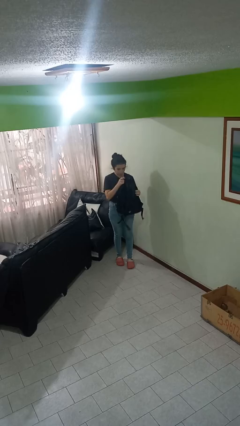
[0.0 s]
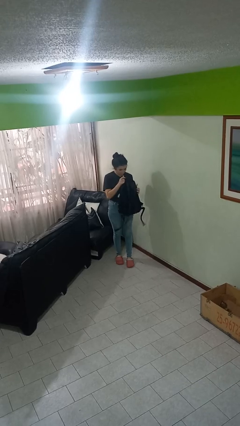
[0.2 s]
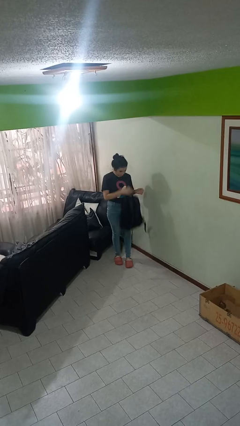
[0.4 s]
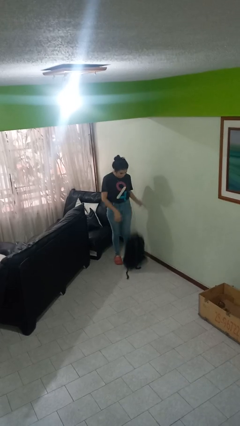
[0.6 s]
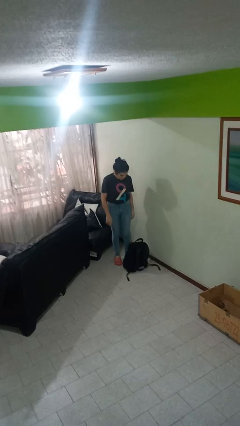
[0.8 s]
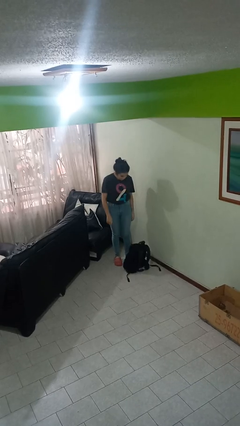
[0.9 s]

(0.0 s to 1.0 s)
person drops object

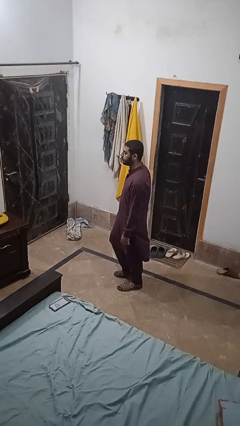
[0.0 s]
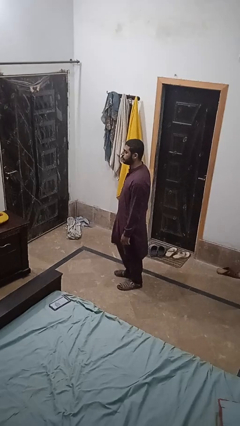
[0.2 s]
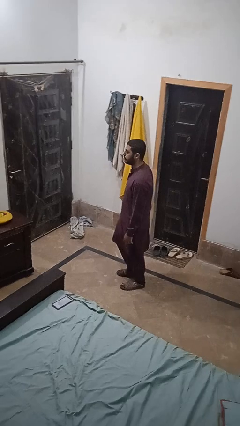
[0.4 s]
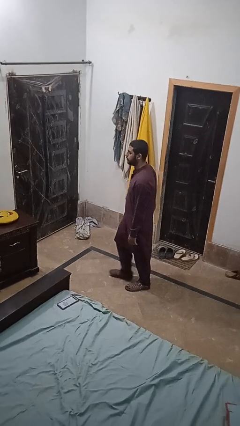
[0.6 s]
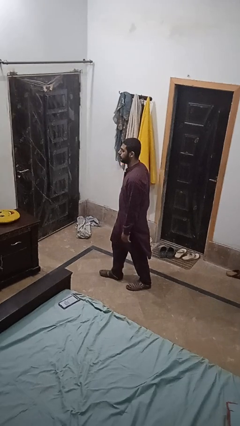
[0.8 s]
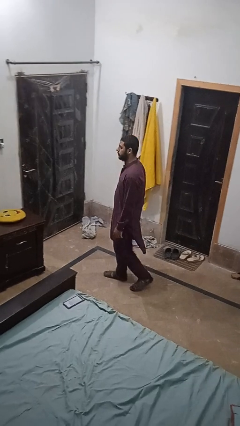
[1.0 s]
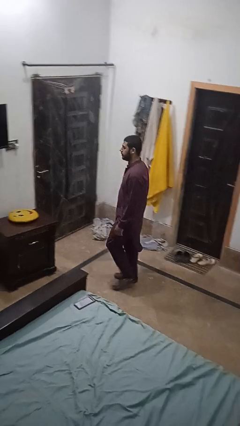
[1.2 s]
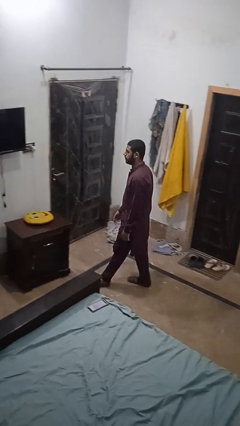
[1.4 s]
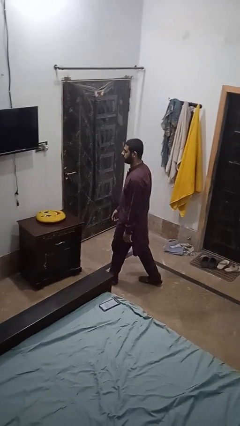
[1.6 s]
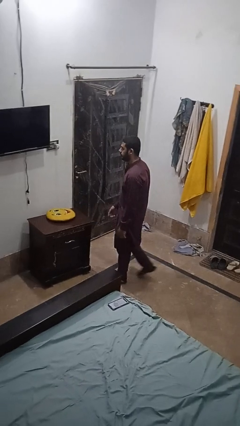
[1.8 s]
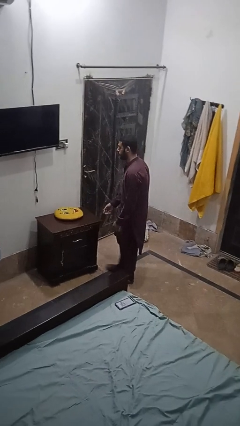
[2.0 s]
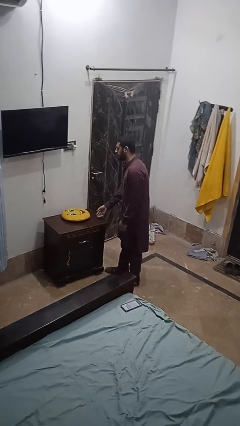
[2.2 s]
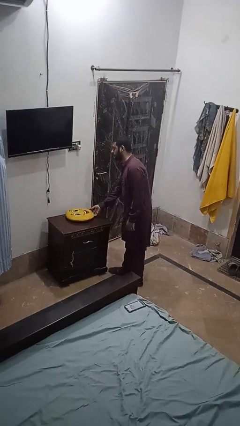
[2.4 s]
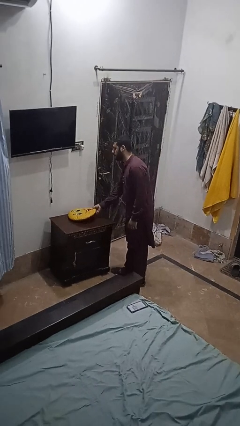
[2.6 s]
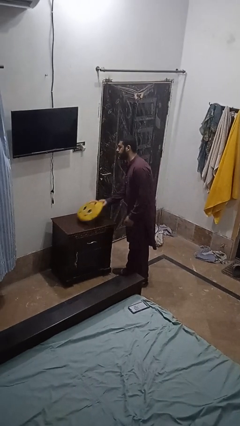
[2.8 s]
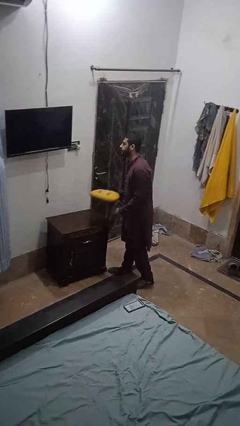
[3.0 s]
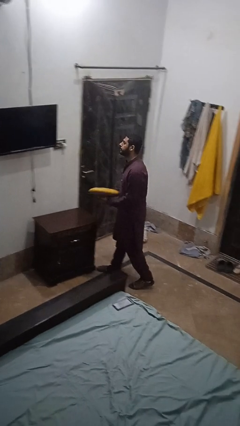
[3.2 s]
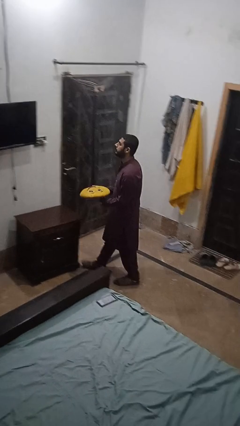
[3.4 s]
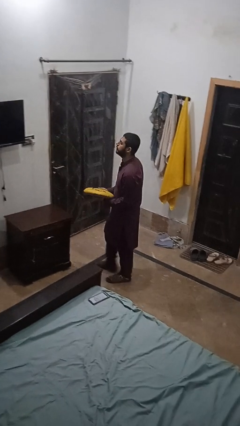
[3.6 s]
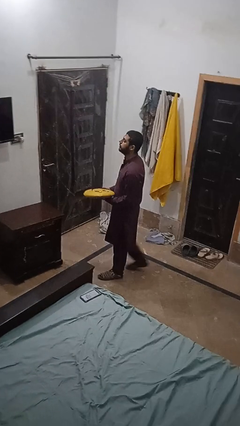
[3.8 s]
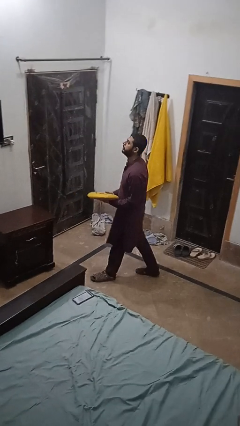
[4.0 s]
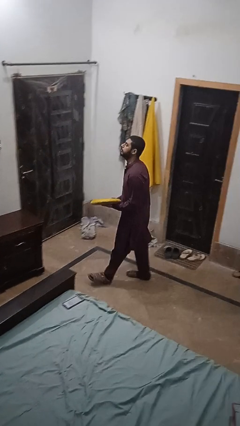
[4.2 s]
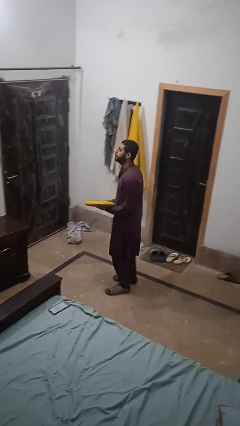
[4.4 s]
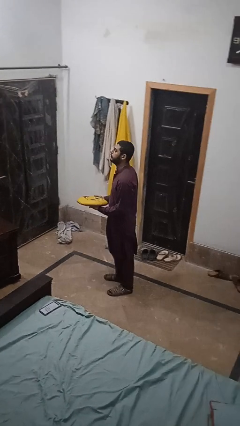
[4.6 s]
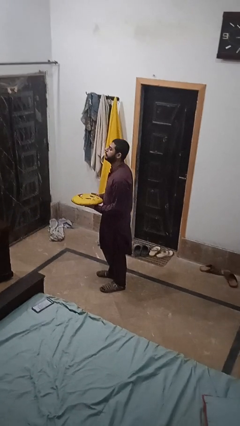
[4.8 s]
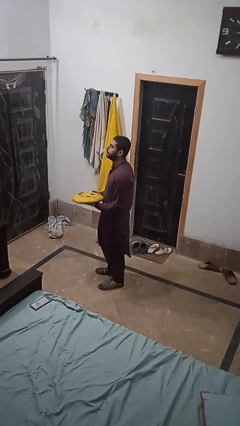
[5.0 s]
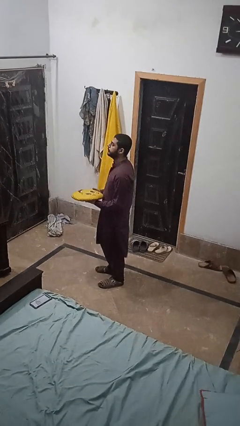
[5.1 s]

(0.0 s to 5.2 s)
person picks up object from table

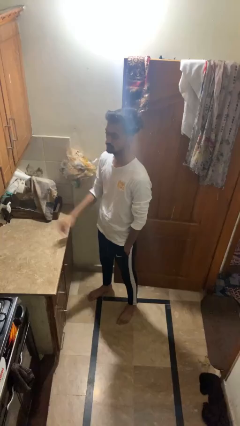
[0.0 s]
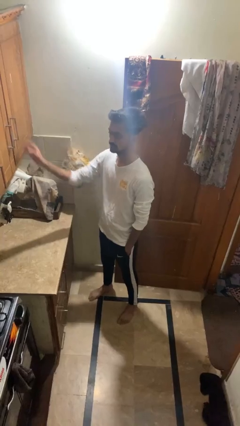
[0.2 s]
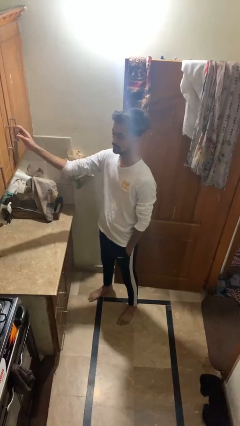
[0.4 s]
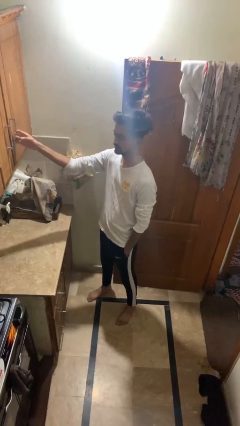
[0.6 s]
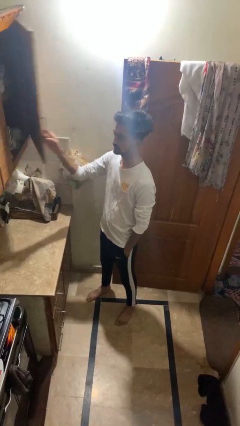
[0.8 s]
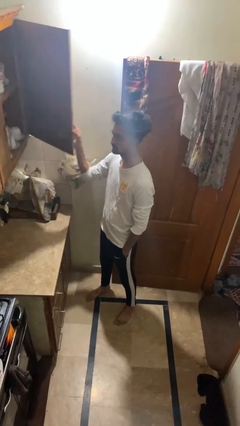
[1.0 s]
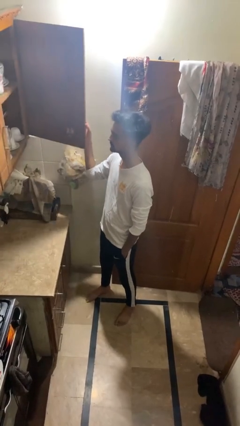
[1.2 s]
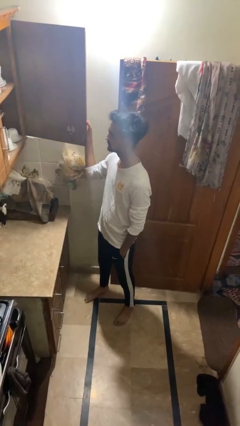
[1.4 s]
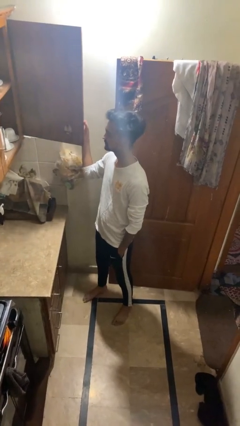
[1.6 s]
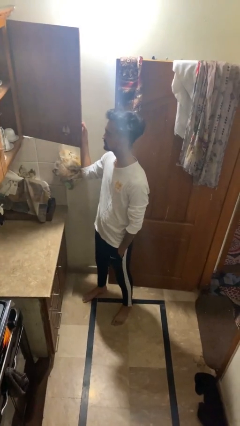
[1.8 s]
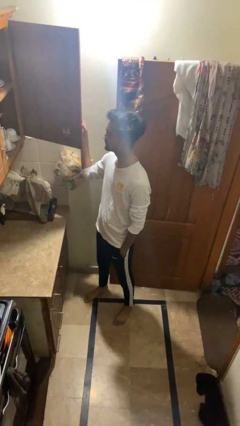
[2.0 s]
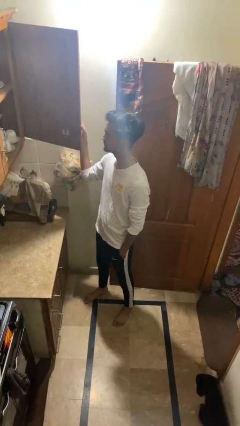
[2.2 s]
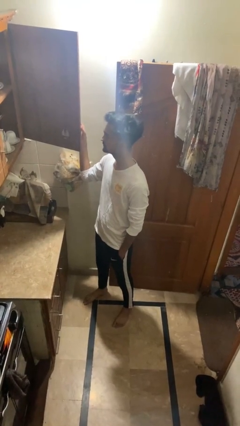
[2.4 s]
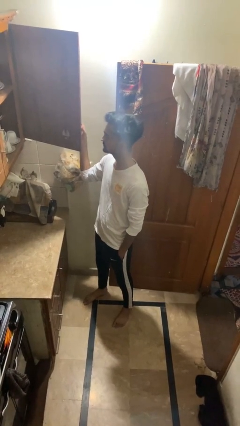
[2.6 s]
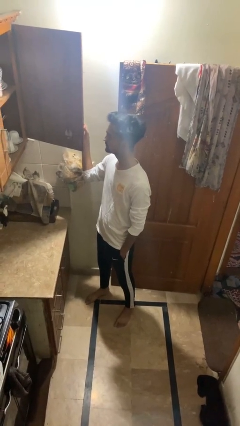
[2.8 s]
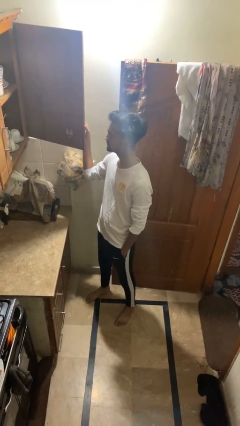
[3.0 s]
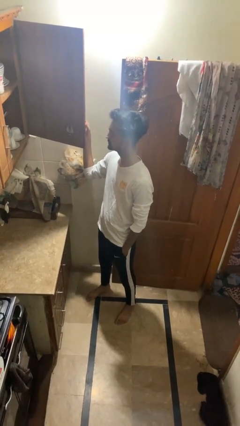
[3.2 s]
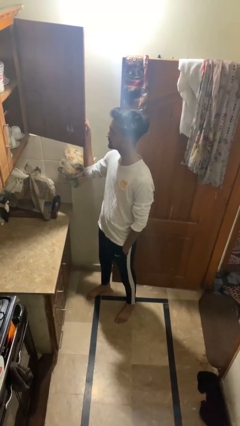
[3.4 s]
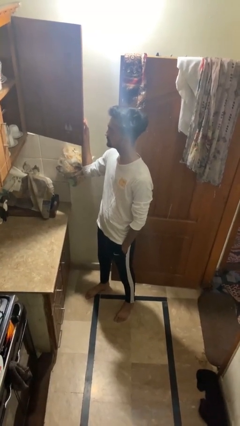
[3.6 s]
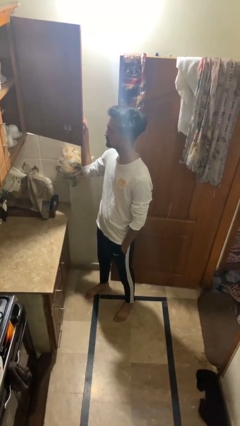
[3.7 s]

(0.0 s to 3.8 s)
person opens cabinet

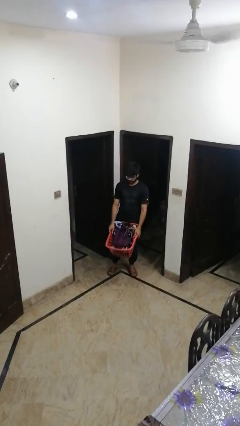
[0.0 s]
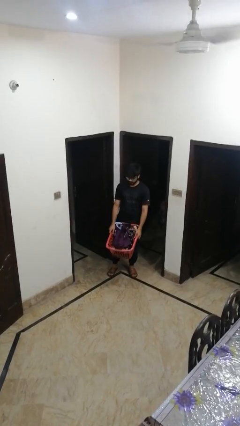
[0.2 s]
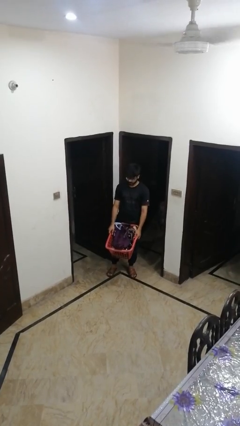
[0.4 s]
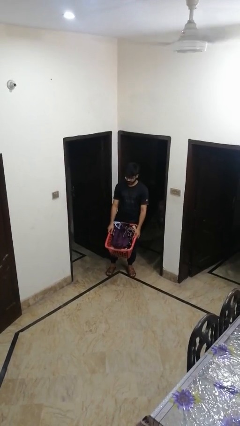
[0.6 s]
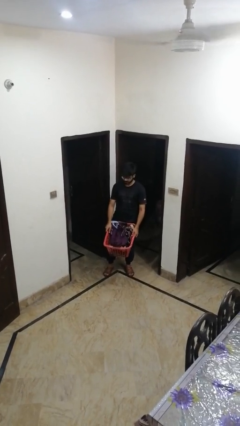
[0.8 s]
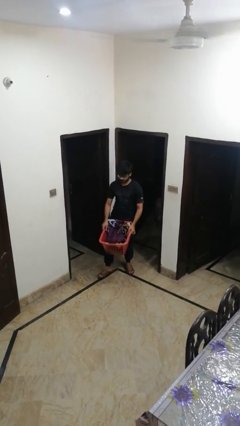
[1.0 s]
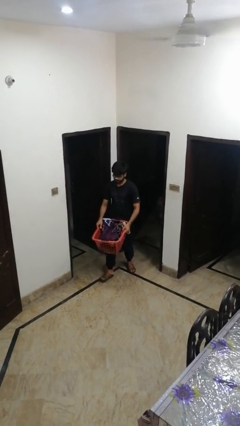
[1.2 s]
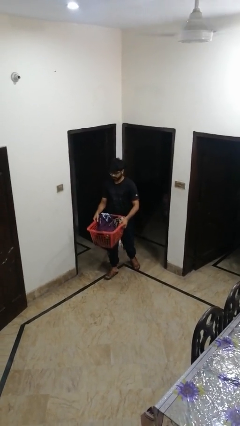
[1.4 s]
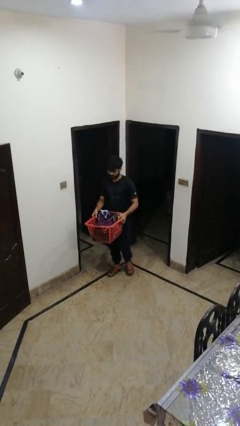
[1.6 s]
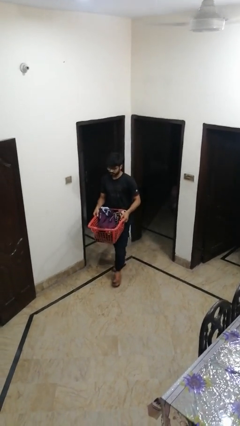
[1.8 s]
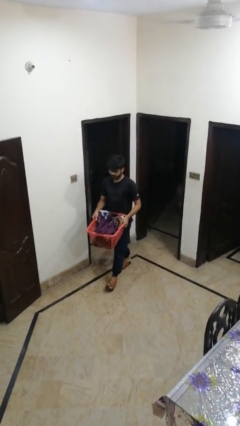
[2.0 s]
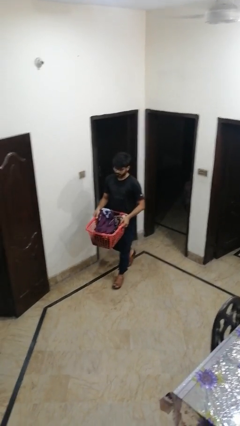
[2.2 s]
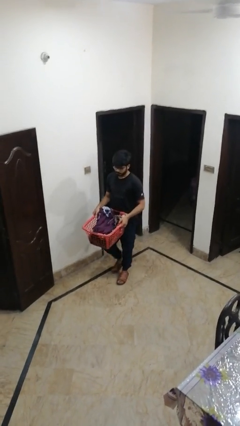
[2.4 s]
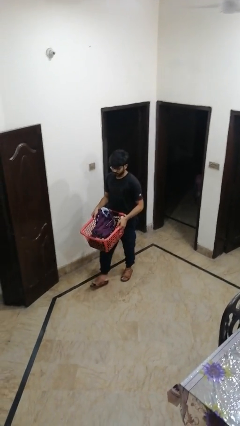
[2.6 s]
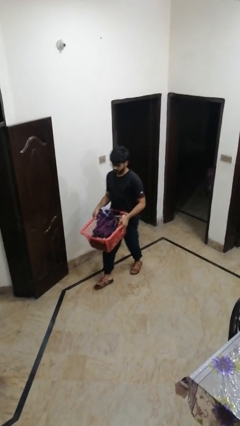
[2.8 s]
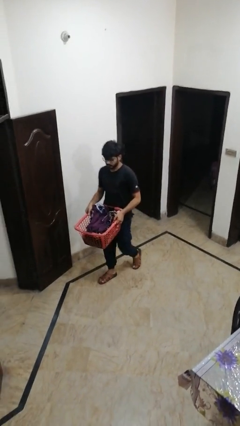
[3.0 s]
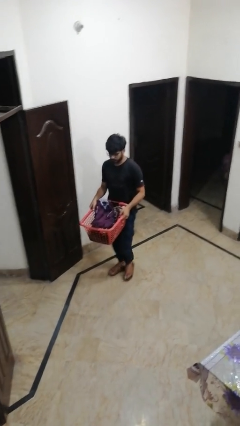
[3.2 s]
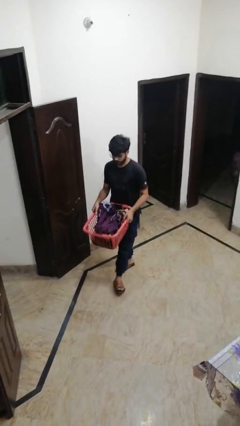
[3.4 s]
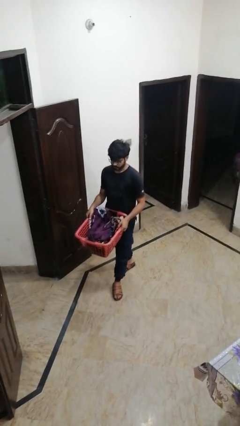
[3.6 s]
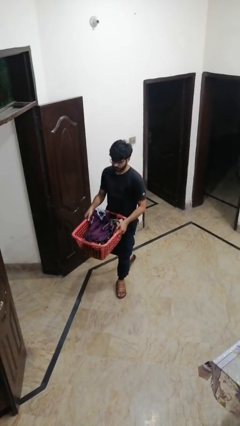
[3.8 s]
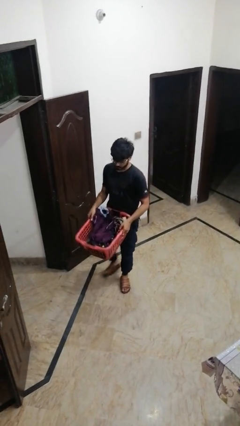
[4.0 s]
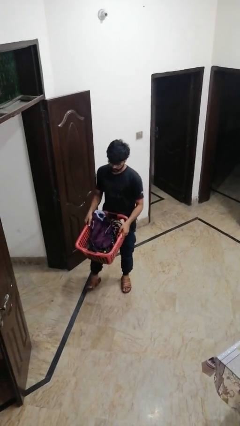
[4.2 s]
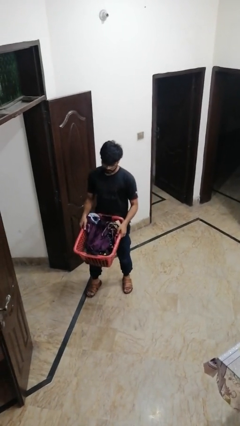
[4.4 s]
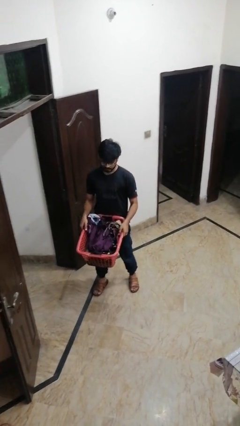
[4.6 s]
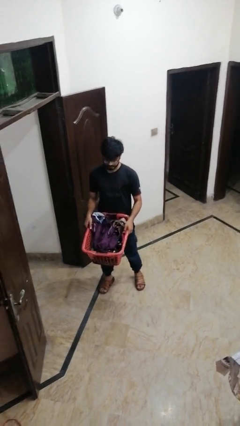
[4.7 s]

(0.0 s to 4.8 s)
person carries laundry basket

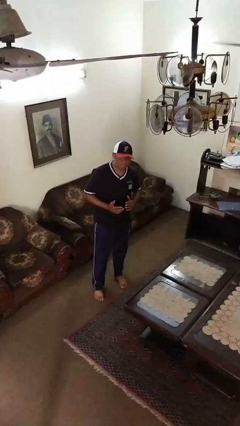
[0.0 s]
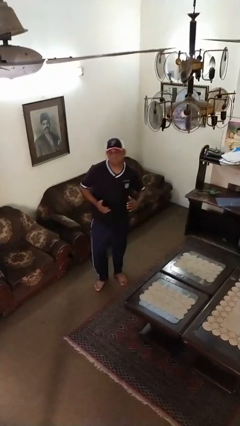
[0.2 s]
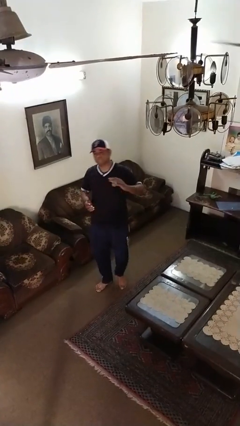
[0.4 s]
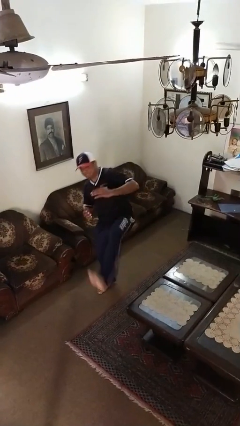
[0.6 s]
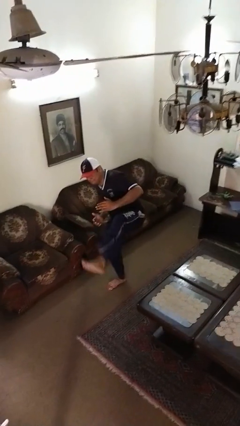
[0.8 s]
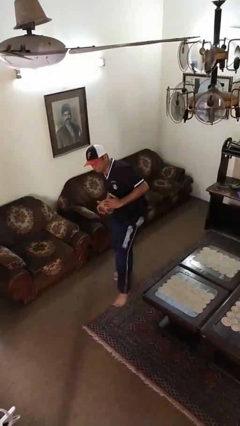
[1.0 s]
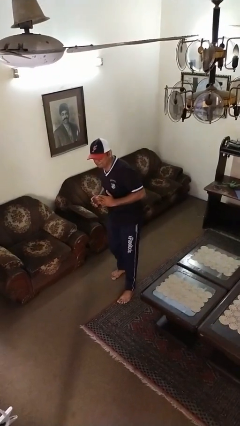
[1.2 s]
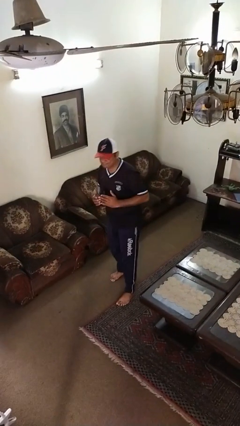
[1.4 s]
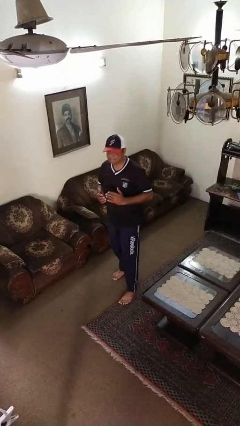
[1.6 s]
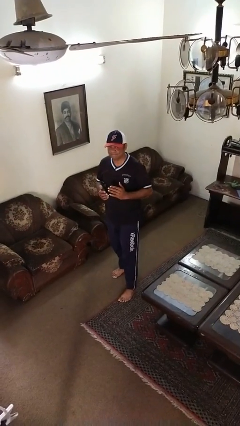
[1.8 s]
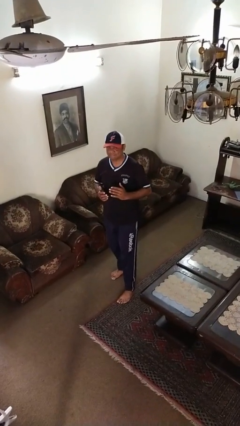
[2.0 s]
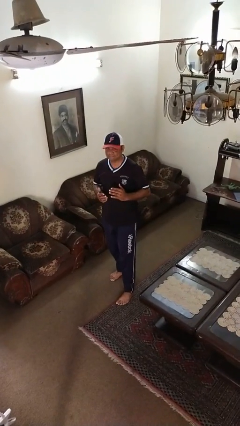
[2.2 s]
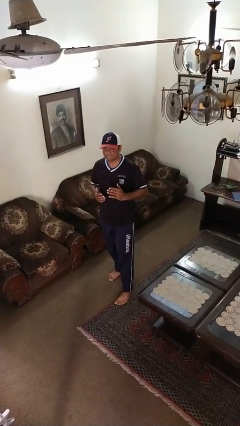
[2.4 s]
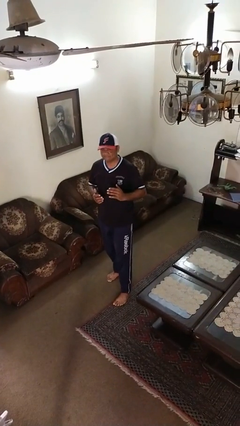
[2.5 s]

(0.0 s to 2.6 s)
person karate kicks
